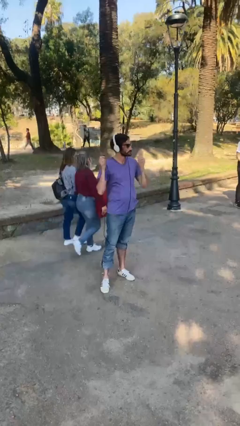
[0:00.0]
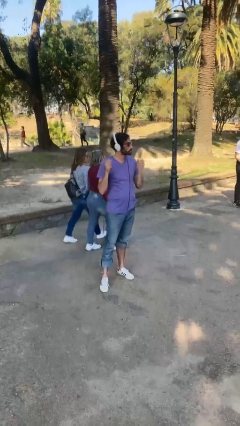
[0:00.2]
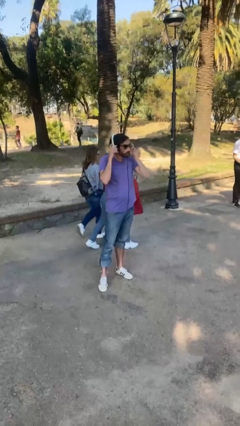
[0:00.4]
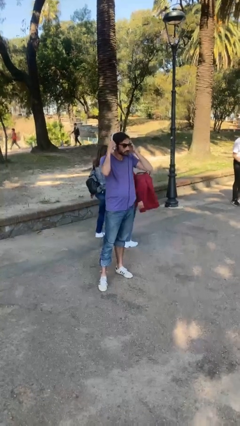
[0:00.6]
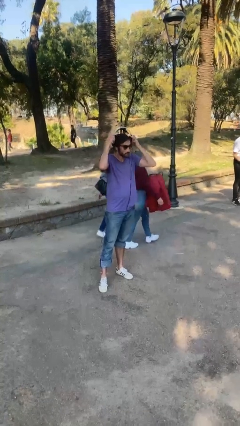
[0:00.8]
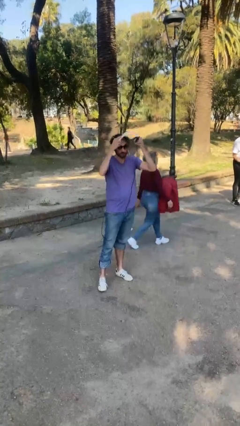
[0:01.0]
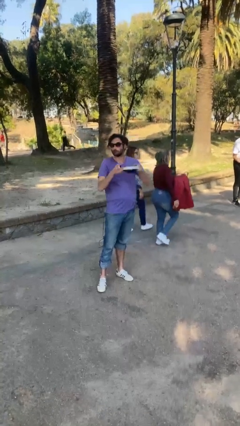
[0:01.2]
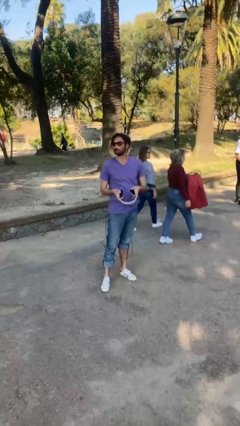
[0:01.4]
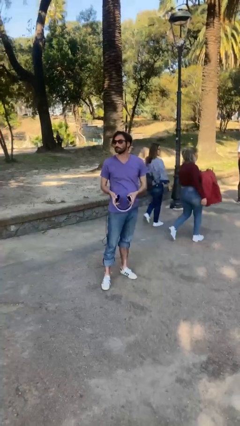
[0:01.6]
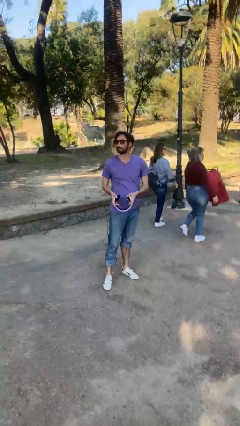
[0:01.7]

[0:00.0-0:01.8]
person takes off headphones

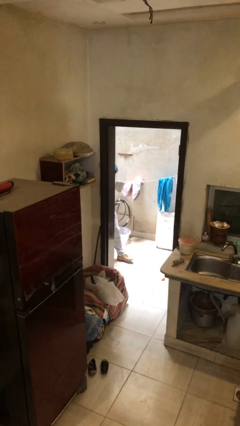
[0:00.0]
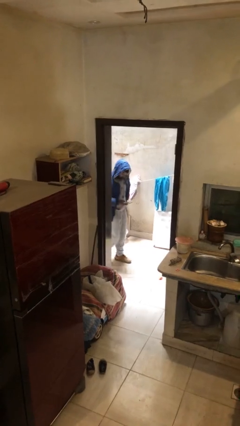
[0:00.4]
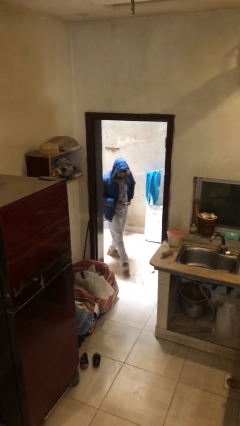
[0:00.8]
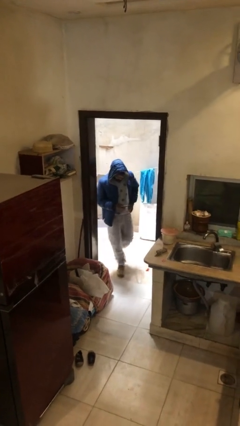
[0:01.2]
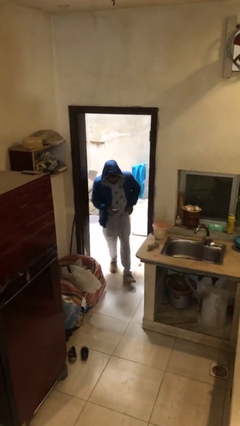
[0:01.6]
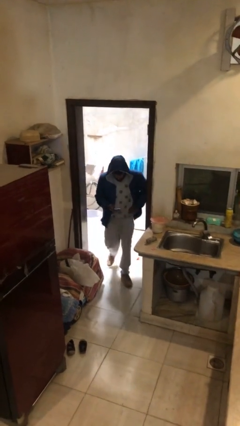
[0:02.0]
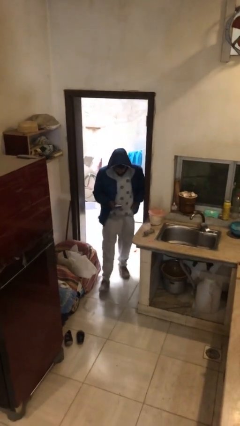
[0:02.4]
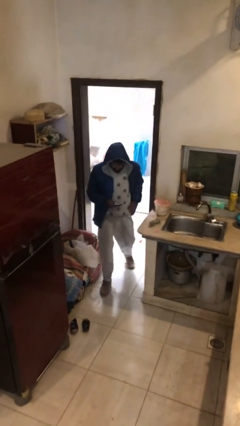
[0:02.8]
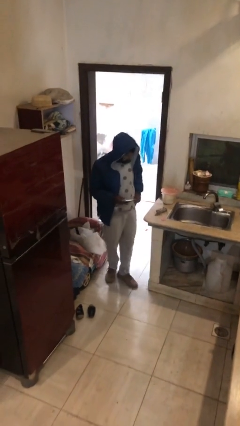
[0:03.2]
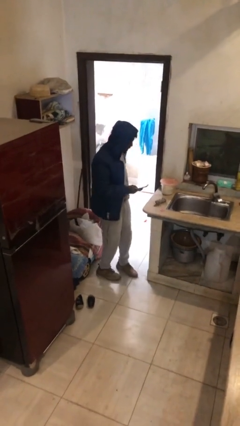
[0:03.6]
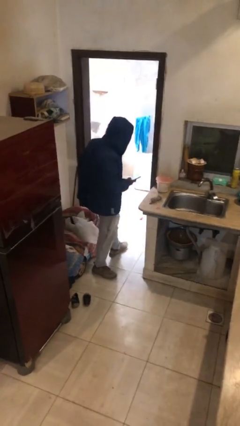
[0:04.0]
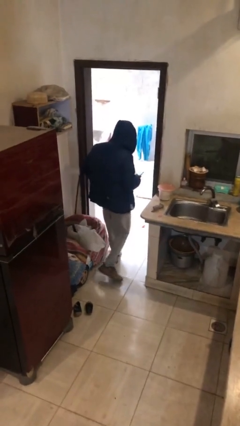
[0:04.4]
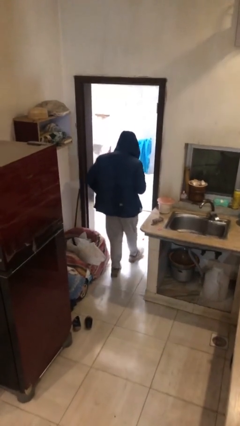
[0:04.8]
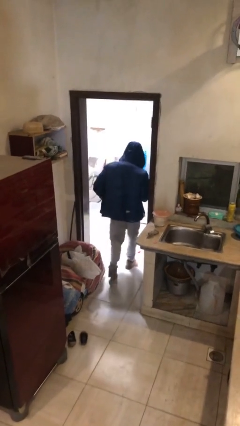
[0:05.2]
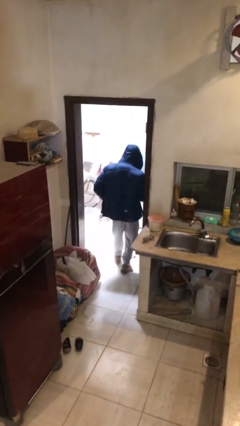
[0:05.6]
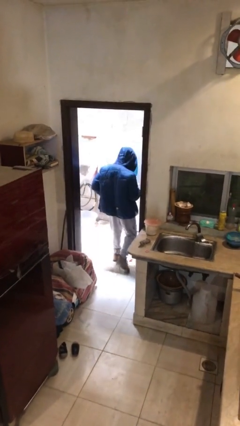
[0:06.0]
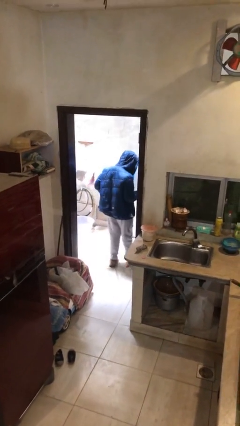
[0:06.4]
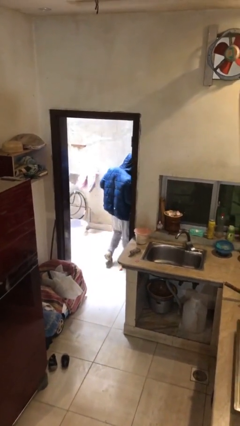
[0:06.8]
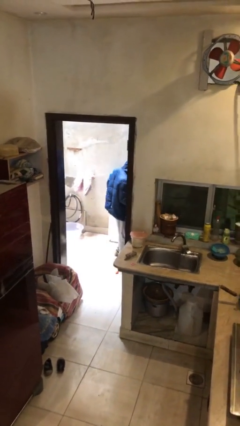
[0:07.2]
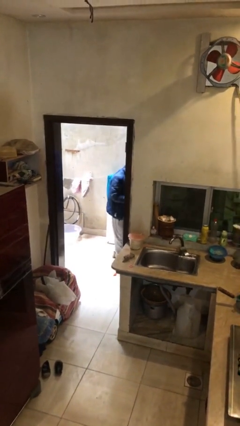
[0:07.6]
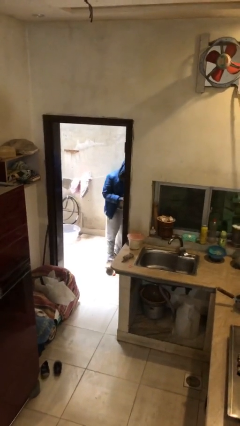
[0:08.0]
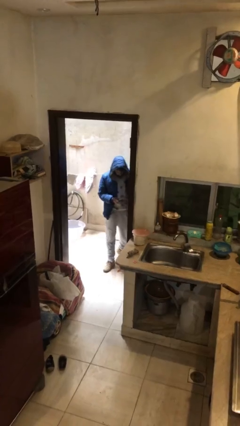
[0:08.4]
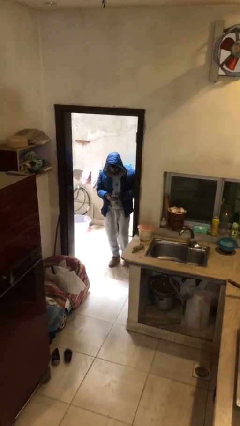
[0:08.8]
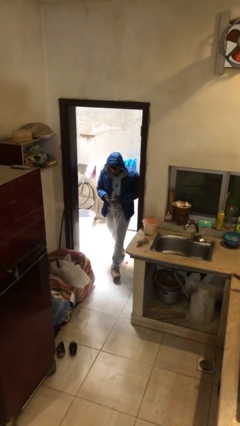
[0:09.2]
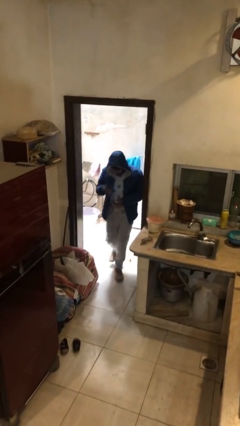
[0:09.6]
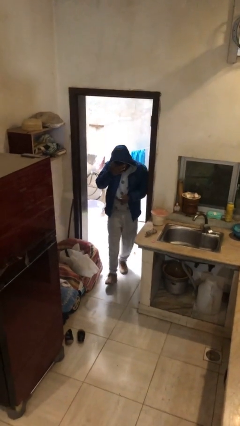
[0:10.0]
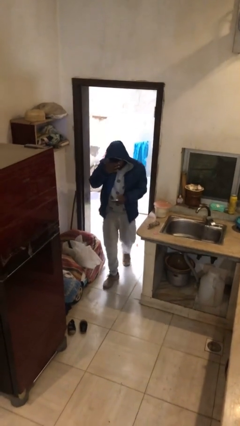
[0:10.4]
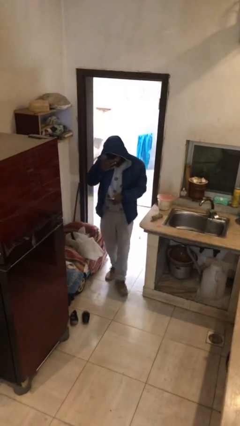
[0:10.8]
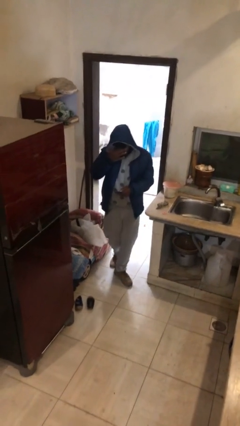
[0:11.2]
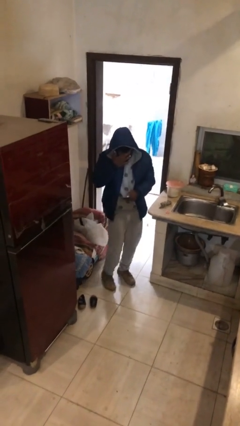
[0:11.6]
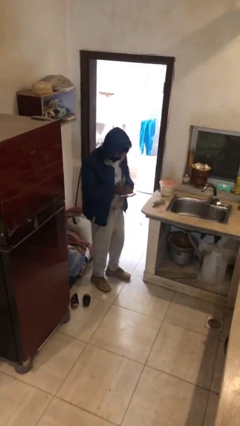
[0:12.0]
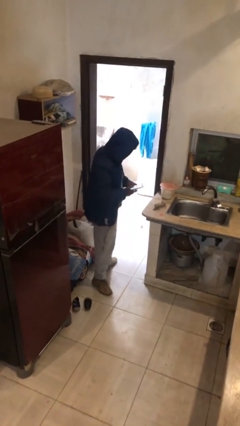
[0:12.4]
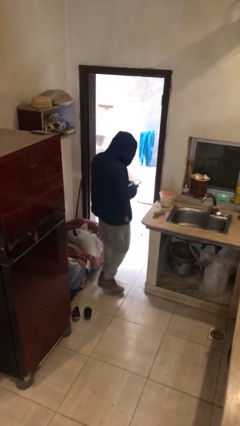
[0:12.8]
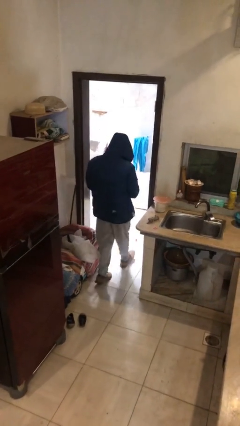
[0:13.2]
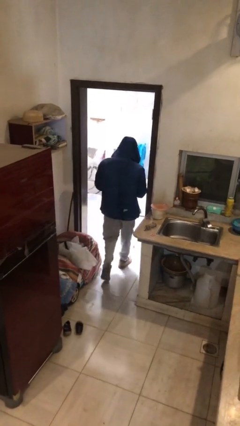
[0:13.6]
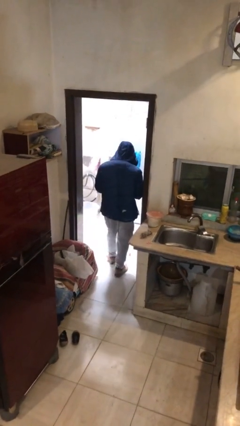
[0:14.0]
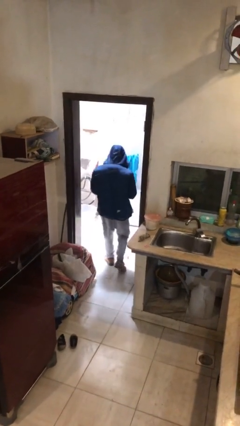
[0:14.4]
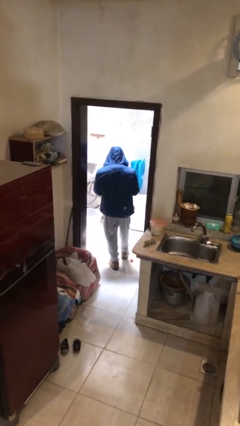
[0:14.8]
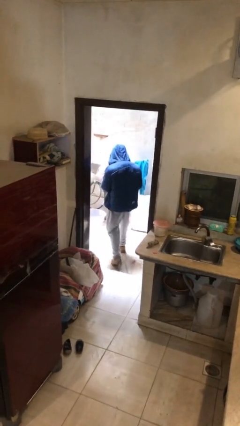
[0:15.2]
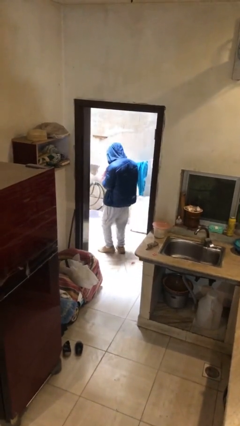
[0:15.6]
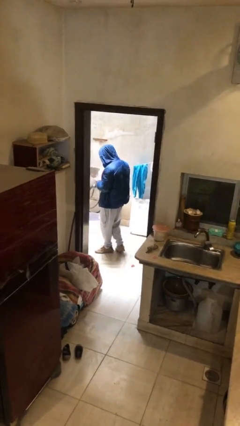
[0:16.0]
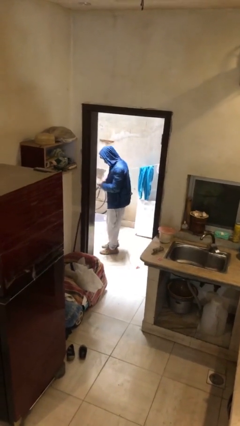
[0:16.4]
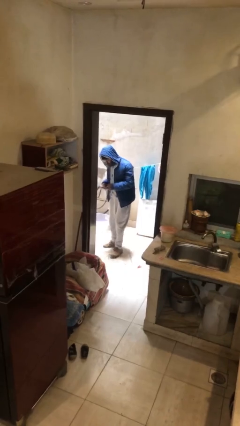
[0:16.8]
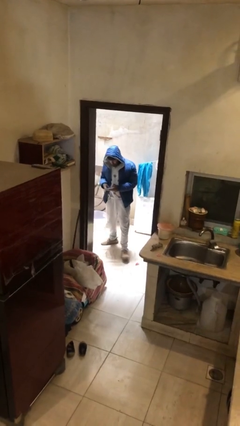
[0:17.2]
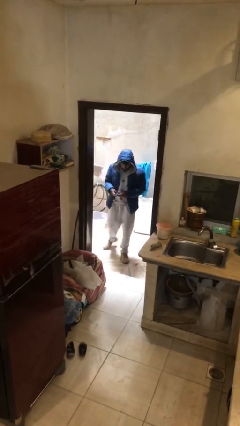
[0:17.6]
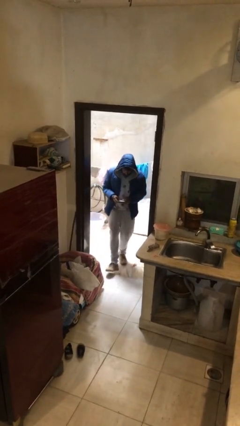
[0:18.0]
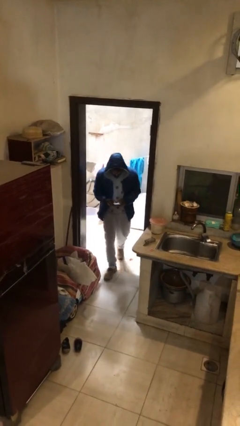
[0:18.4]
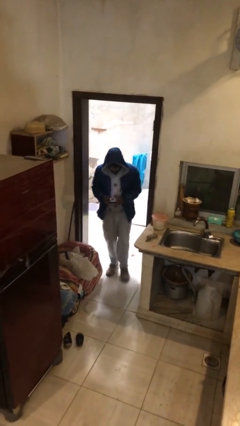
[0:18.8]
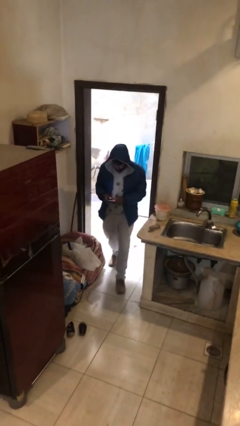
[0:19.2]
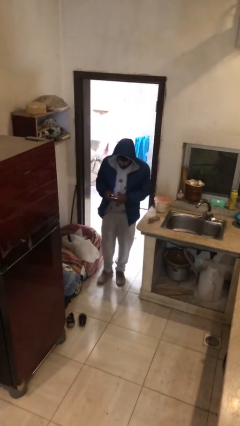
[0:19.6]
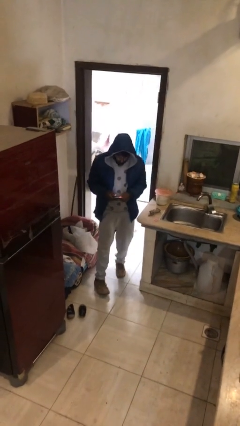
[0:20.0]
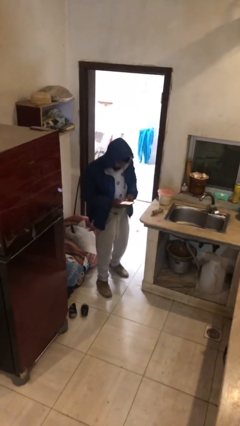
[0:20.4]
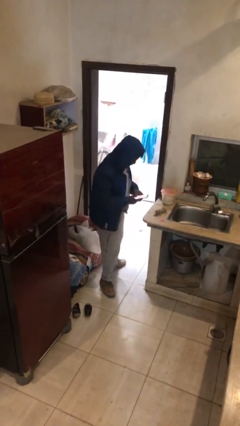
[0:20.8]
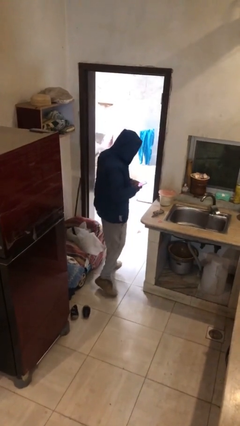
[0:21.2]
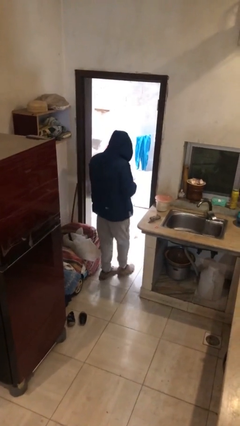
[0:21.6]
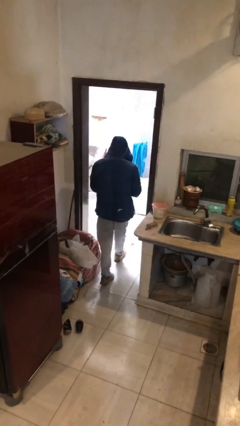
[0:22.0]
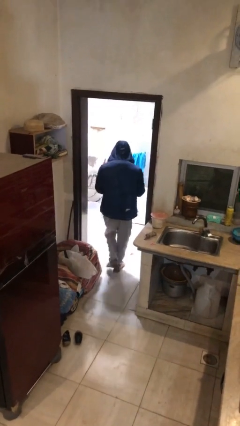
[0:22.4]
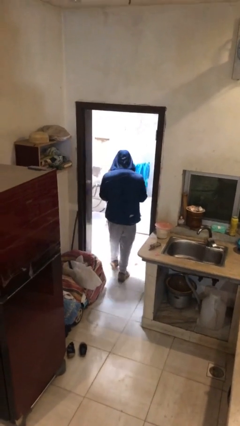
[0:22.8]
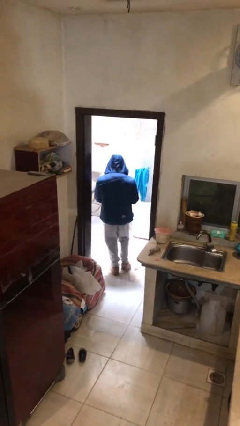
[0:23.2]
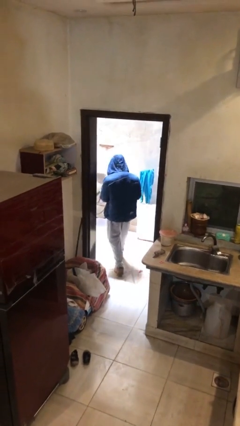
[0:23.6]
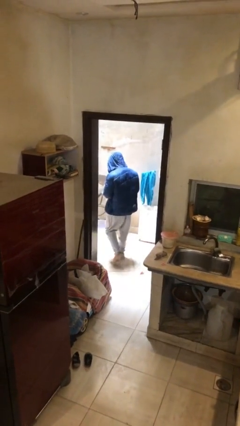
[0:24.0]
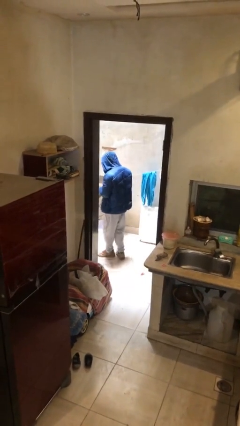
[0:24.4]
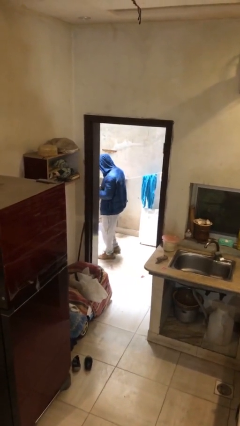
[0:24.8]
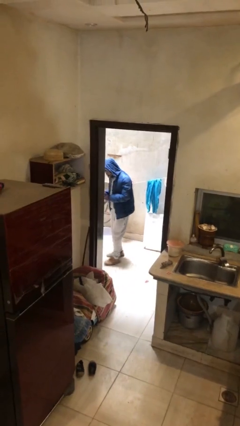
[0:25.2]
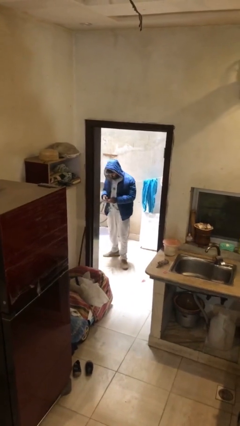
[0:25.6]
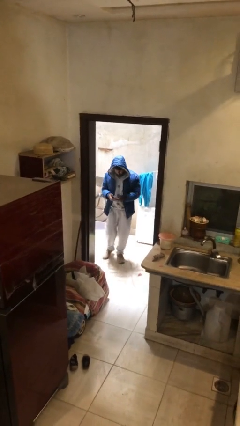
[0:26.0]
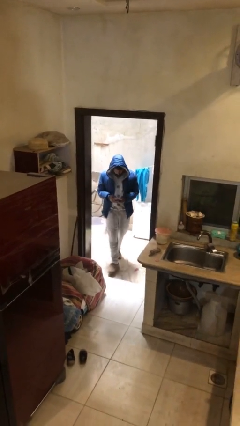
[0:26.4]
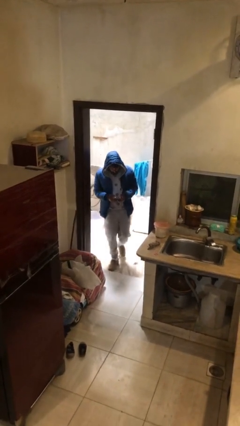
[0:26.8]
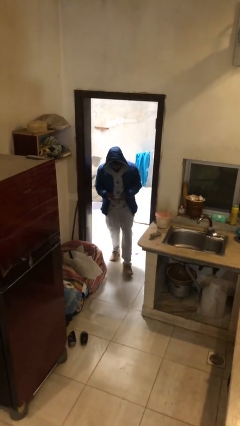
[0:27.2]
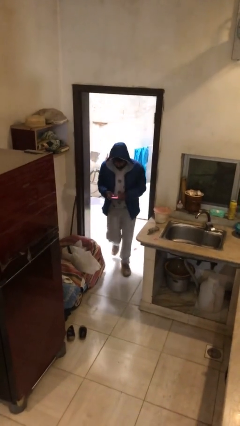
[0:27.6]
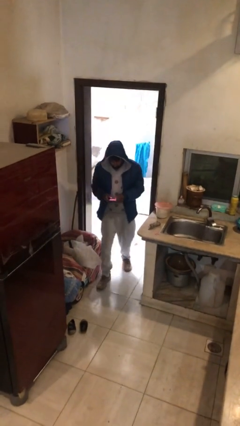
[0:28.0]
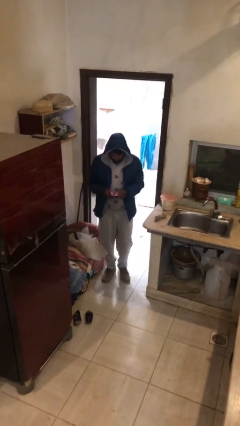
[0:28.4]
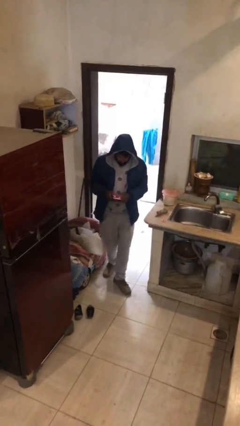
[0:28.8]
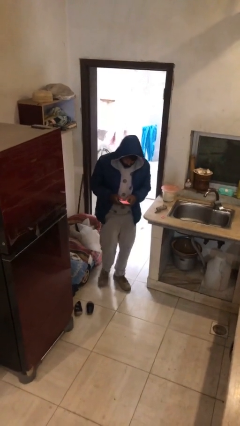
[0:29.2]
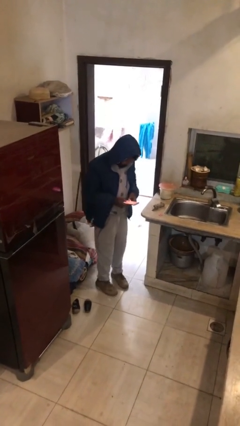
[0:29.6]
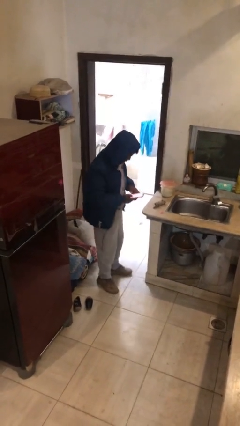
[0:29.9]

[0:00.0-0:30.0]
person texts on phone

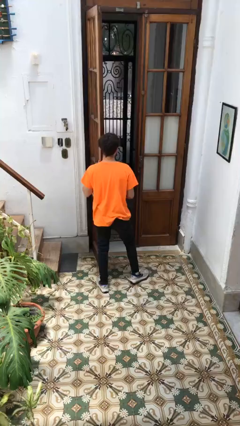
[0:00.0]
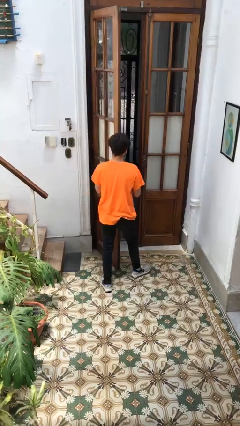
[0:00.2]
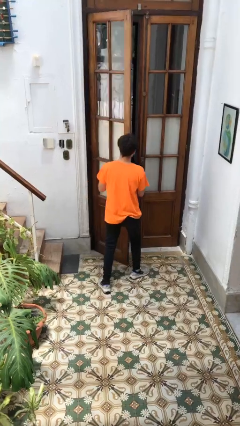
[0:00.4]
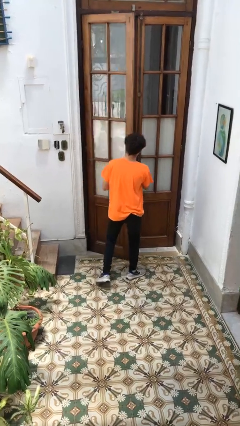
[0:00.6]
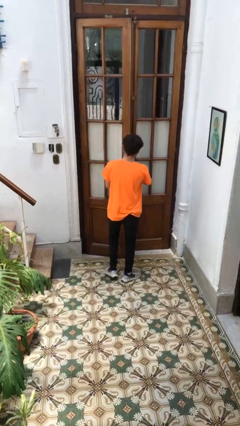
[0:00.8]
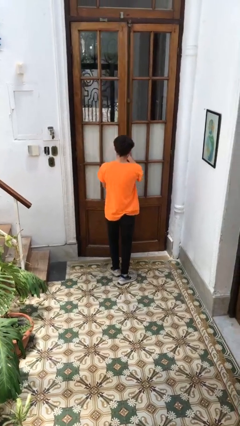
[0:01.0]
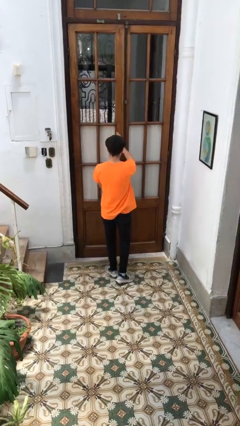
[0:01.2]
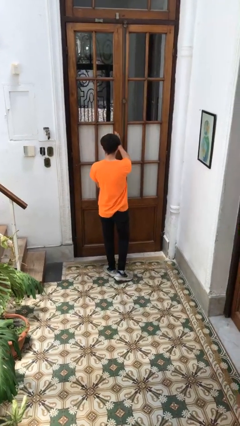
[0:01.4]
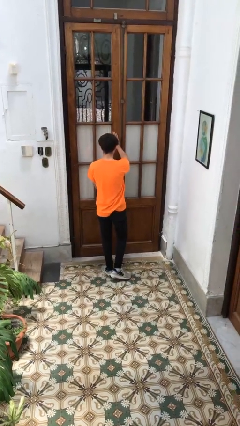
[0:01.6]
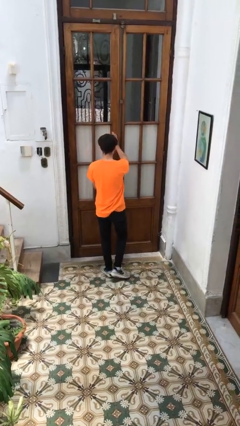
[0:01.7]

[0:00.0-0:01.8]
person closes facility door
